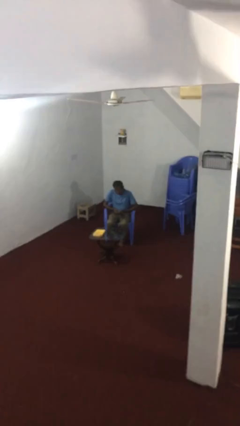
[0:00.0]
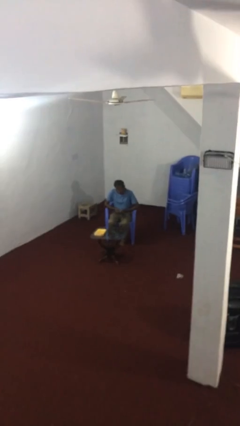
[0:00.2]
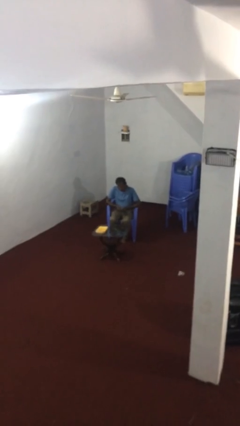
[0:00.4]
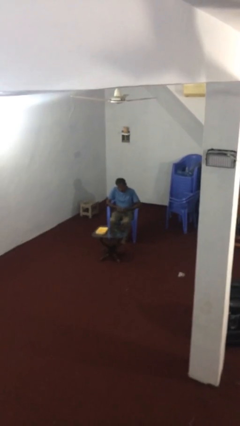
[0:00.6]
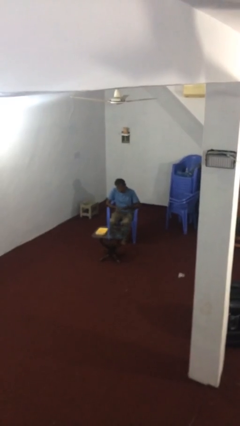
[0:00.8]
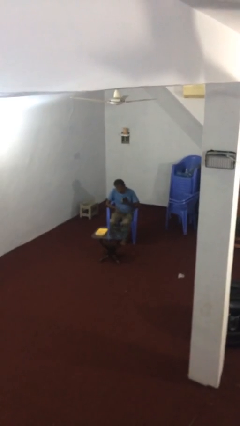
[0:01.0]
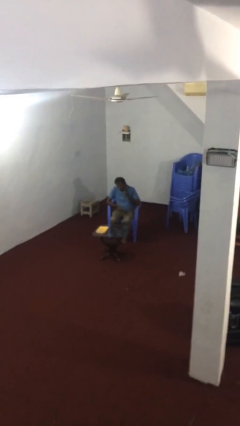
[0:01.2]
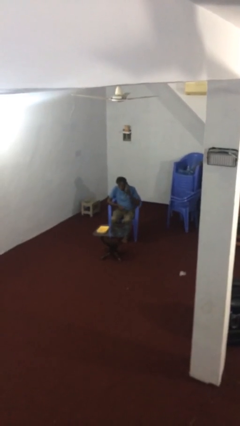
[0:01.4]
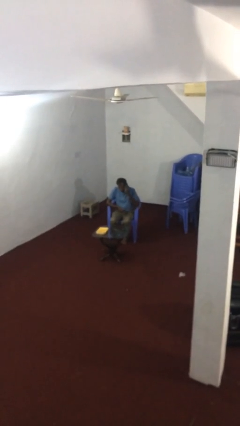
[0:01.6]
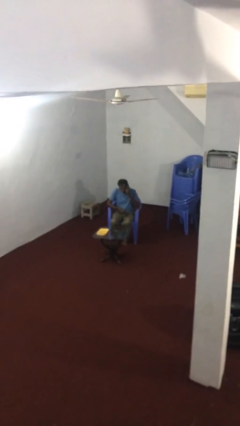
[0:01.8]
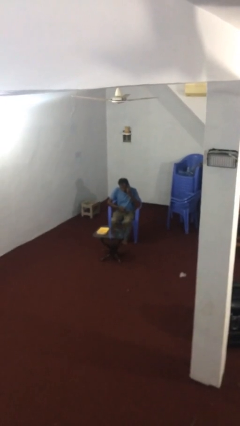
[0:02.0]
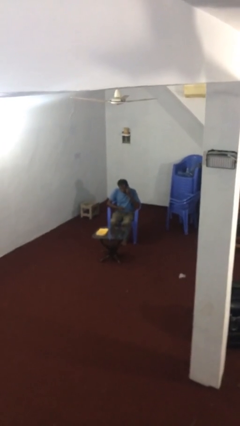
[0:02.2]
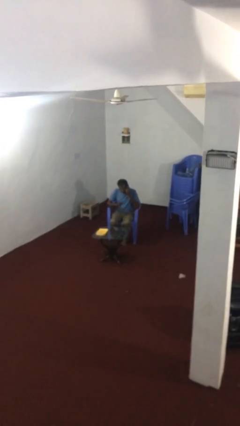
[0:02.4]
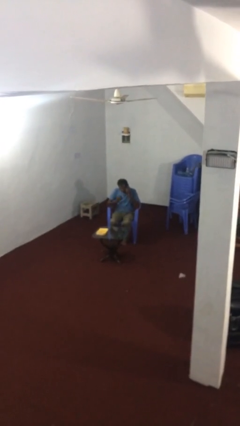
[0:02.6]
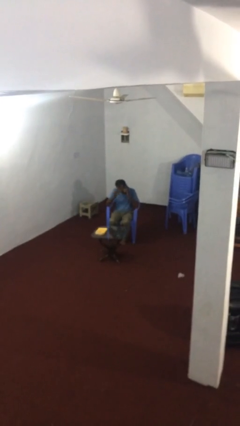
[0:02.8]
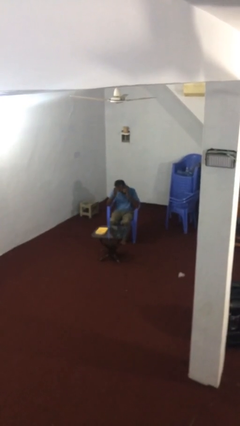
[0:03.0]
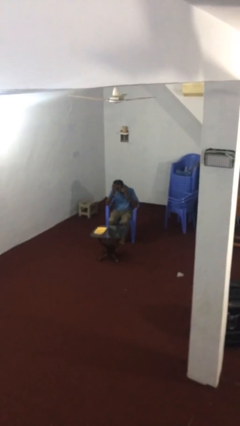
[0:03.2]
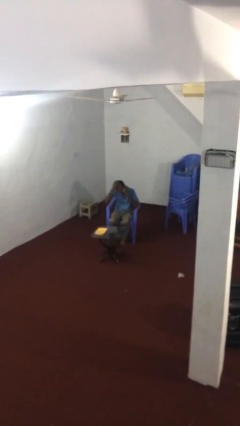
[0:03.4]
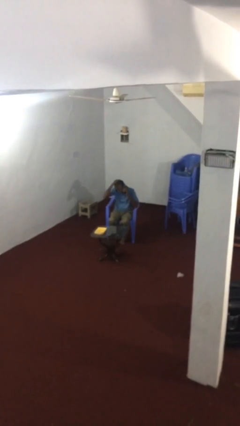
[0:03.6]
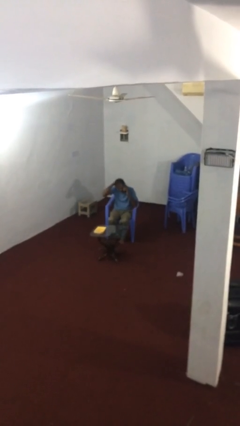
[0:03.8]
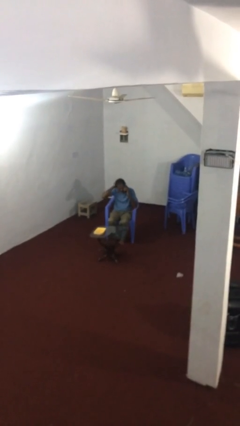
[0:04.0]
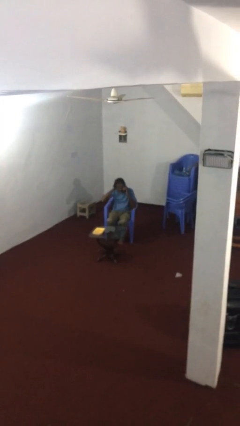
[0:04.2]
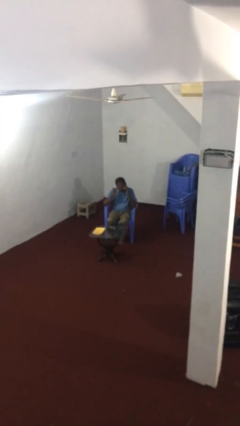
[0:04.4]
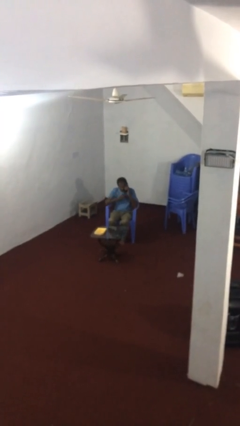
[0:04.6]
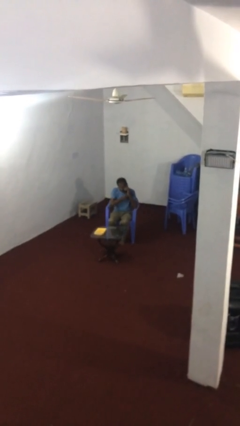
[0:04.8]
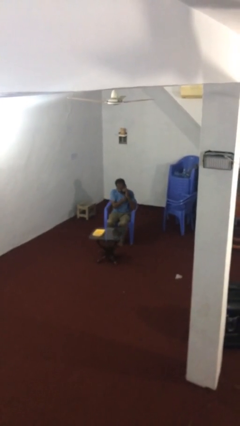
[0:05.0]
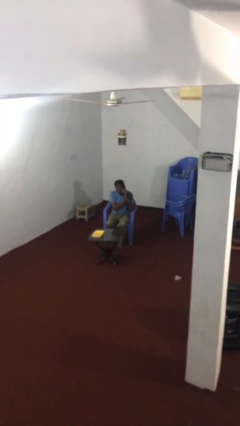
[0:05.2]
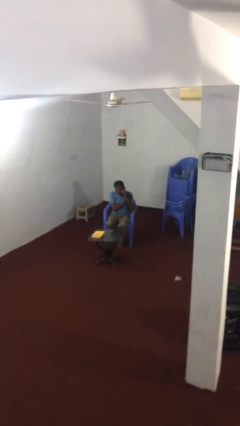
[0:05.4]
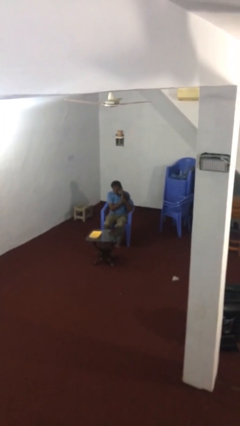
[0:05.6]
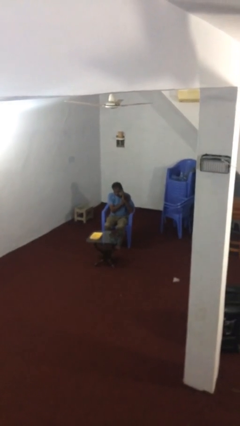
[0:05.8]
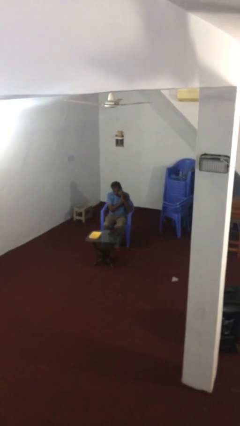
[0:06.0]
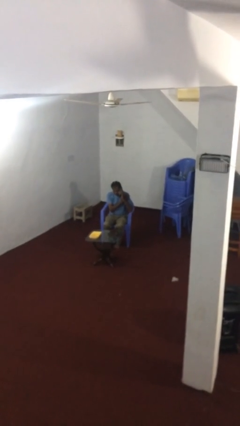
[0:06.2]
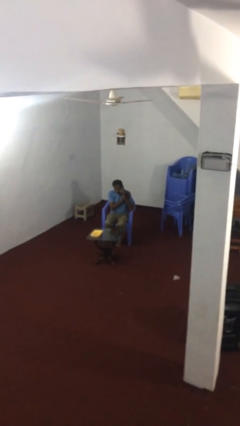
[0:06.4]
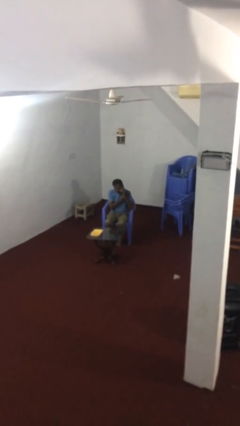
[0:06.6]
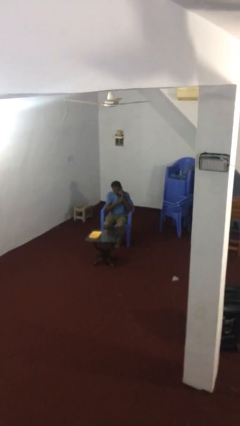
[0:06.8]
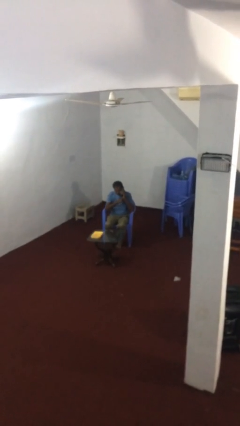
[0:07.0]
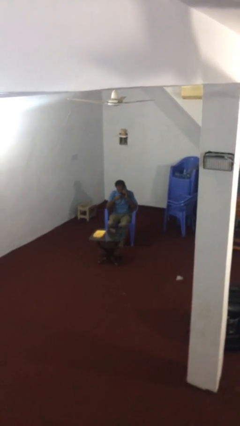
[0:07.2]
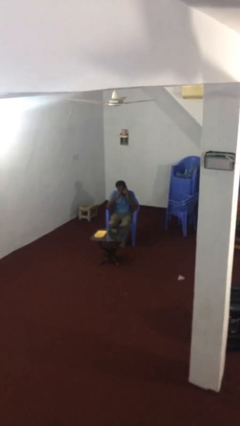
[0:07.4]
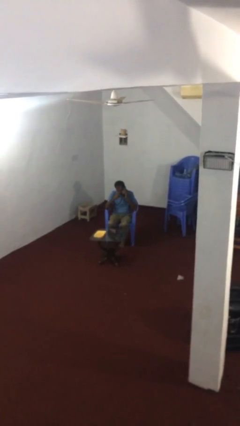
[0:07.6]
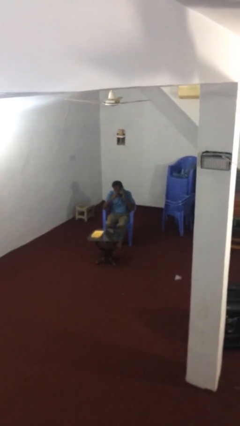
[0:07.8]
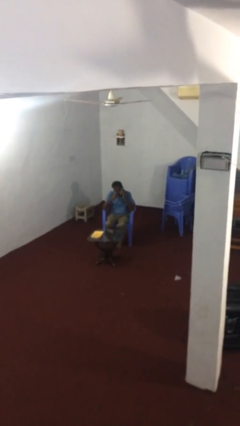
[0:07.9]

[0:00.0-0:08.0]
person talks on phone

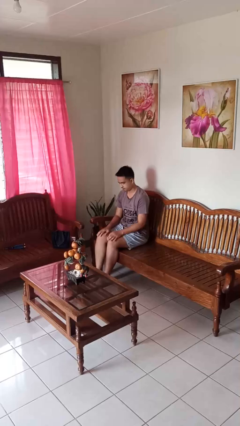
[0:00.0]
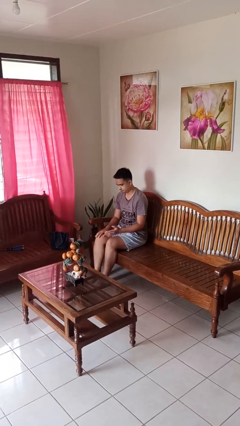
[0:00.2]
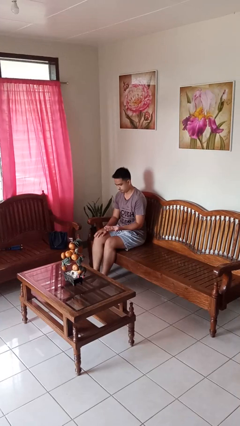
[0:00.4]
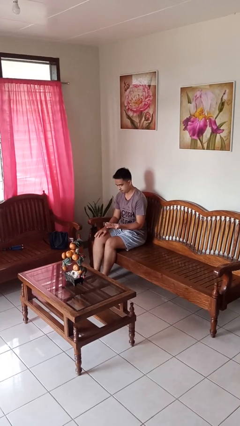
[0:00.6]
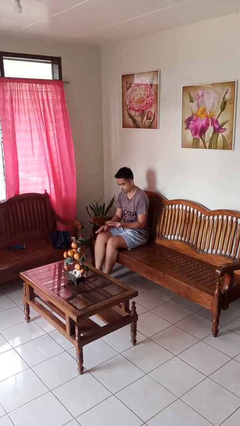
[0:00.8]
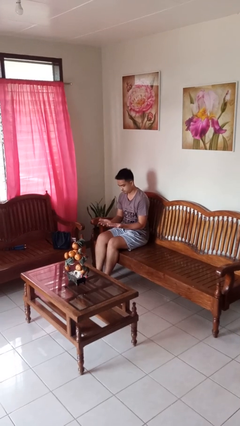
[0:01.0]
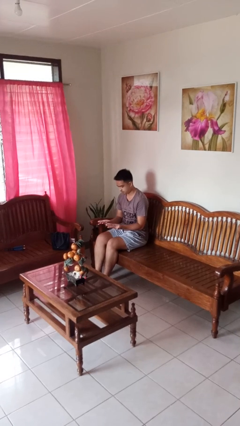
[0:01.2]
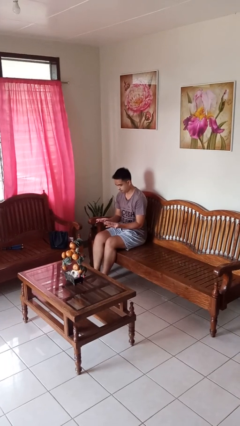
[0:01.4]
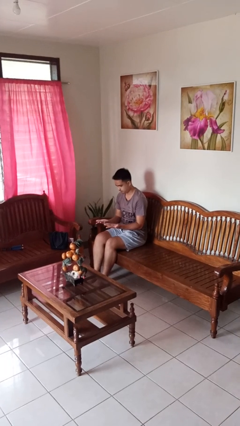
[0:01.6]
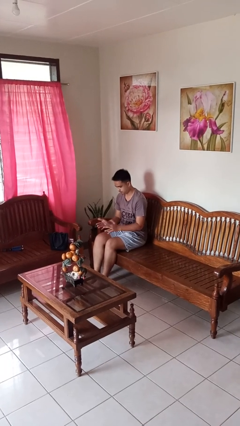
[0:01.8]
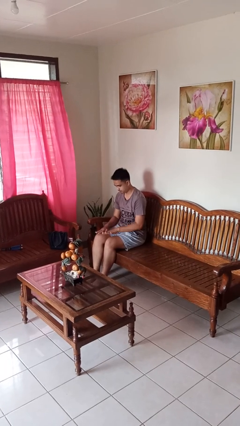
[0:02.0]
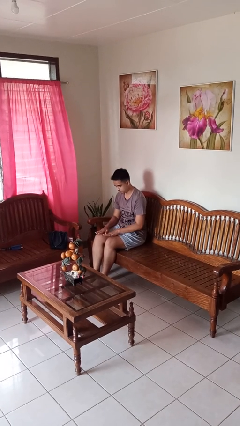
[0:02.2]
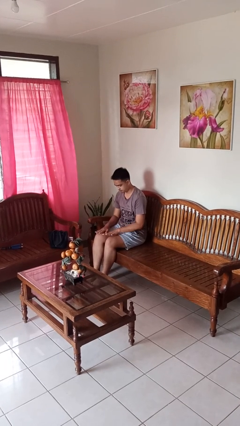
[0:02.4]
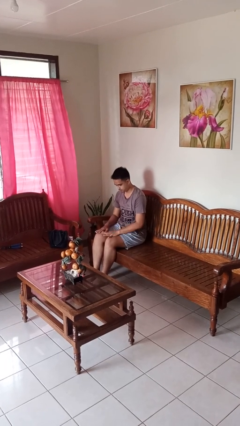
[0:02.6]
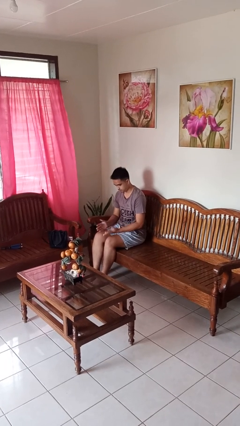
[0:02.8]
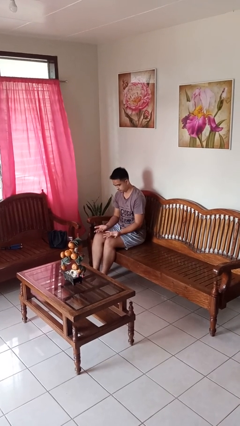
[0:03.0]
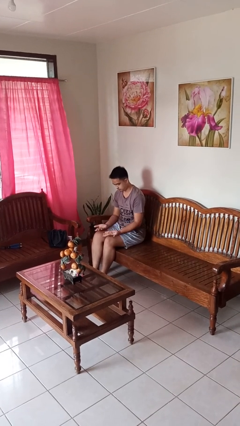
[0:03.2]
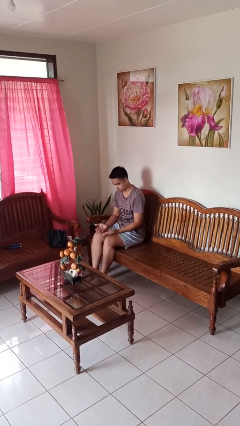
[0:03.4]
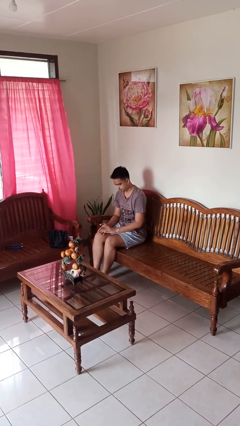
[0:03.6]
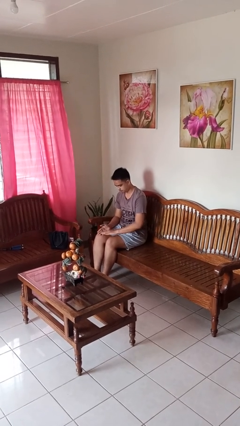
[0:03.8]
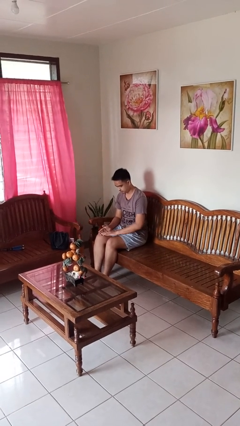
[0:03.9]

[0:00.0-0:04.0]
person looks at hands in lap

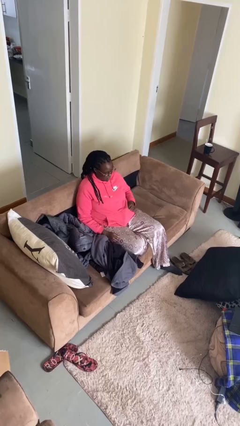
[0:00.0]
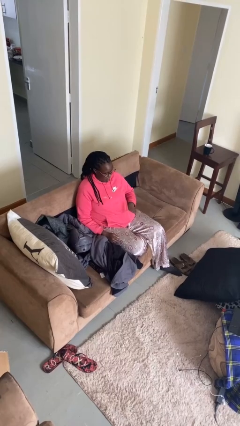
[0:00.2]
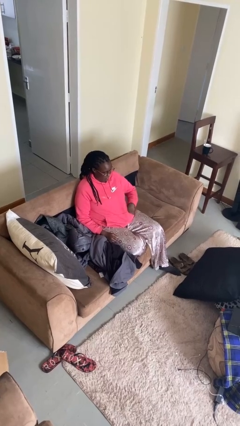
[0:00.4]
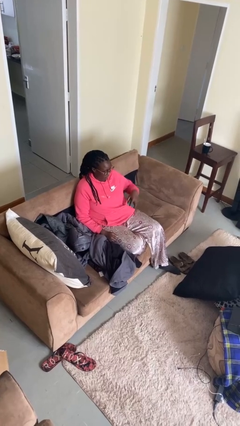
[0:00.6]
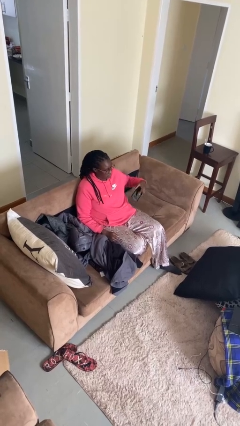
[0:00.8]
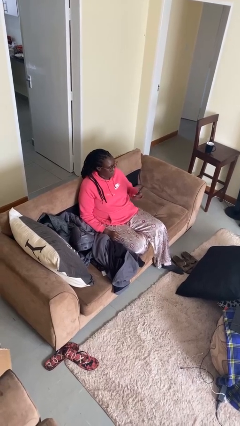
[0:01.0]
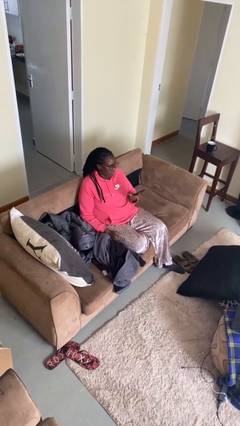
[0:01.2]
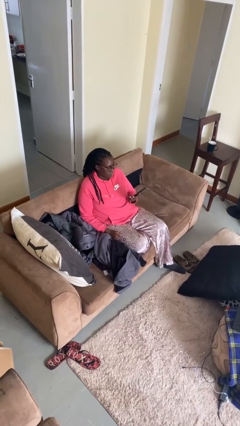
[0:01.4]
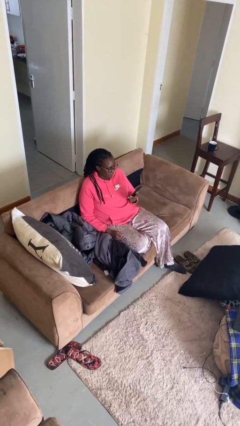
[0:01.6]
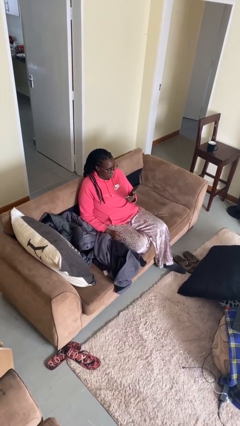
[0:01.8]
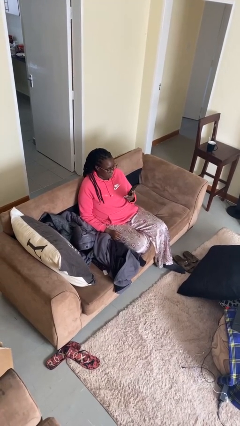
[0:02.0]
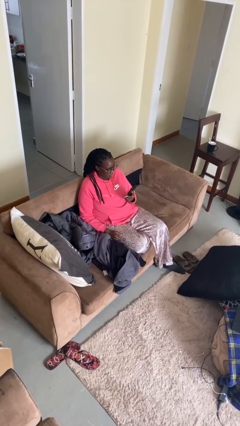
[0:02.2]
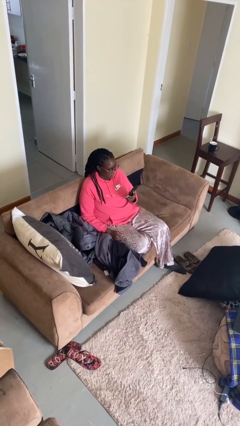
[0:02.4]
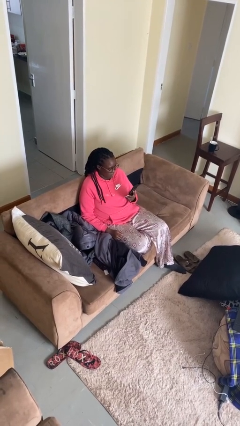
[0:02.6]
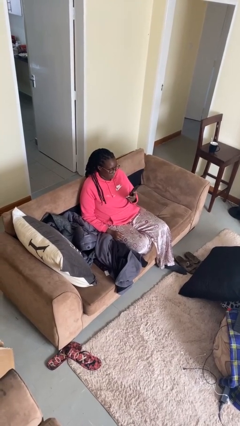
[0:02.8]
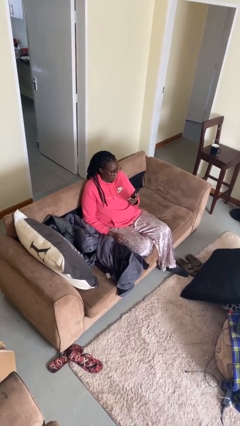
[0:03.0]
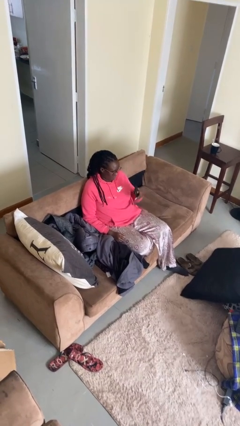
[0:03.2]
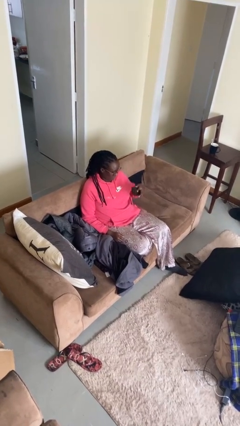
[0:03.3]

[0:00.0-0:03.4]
person takes phone from pocket

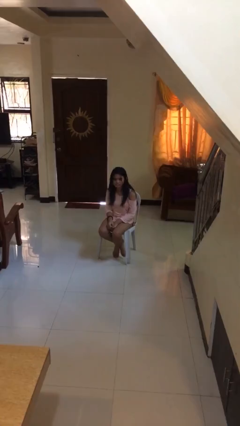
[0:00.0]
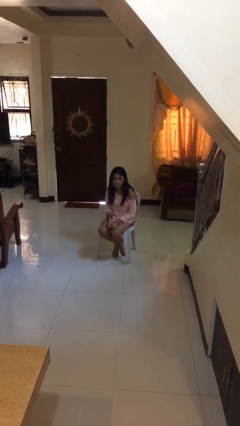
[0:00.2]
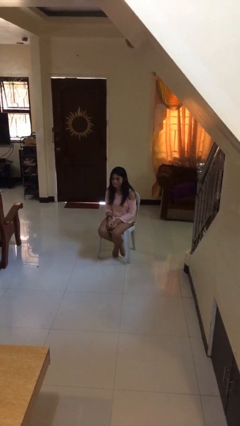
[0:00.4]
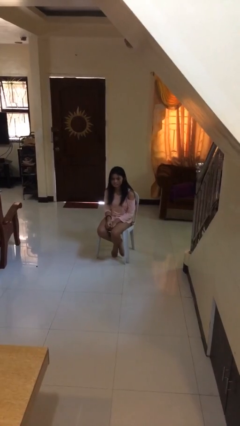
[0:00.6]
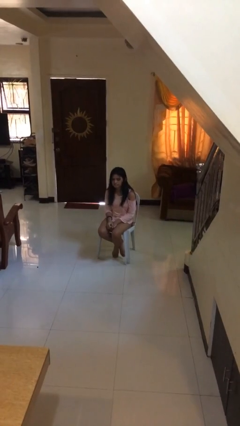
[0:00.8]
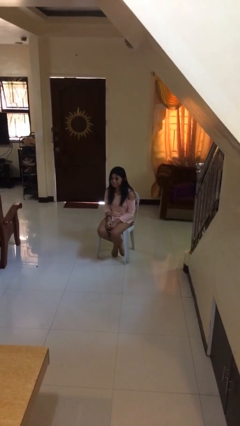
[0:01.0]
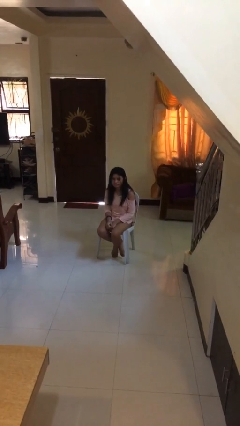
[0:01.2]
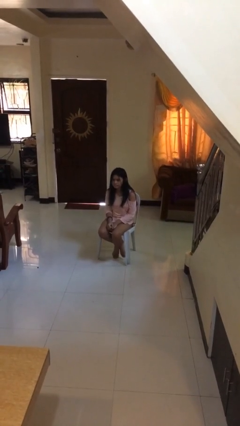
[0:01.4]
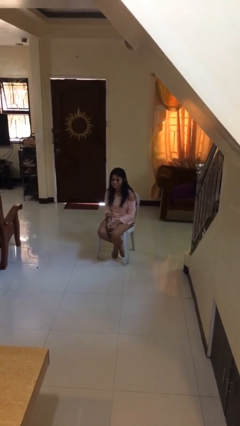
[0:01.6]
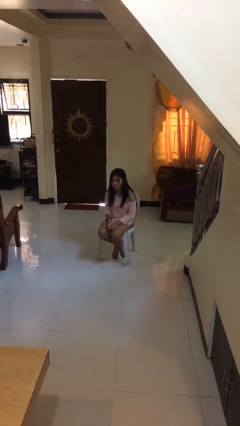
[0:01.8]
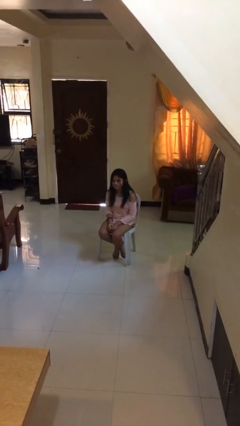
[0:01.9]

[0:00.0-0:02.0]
person shakes head

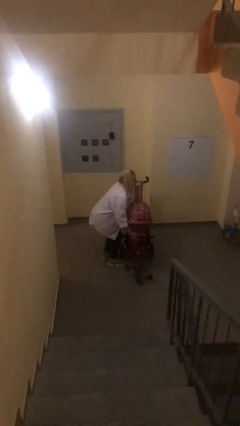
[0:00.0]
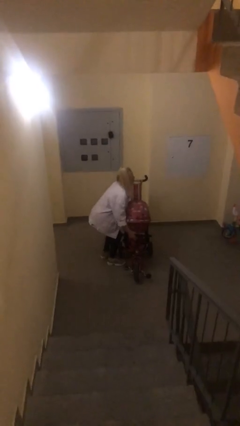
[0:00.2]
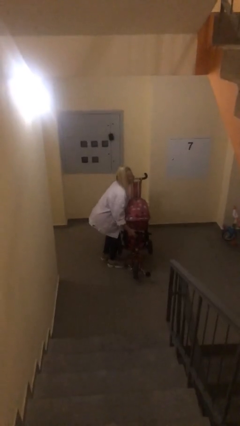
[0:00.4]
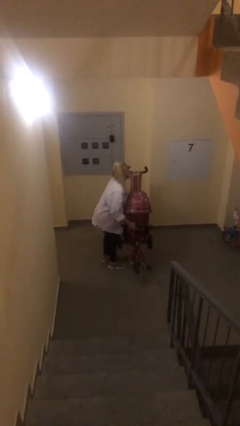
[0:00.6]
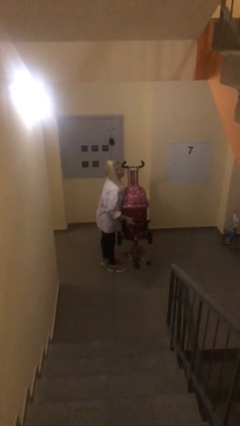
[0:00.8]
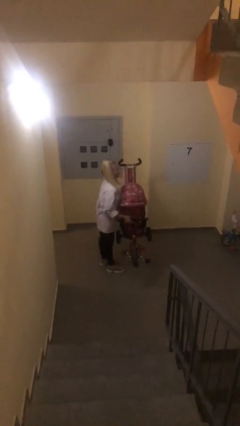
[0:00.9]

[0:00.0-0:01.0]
person picks up object from floor
